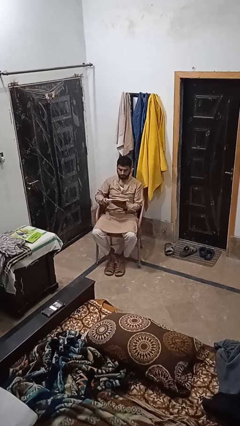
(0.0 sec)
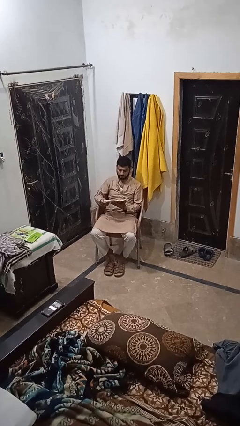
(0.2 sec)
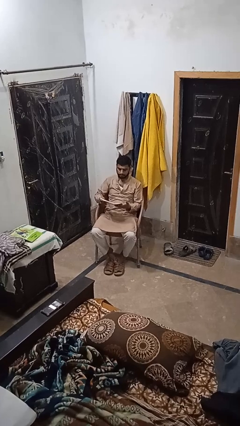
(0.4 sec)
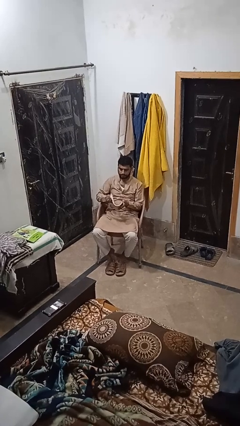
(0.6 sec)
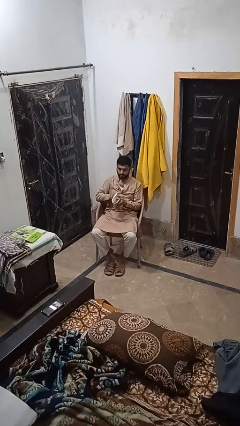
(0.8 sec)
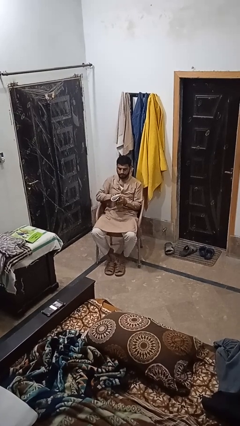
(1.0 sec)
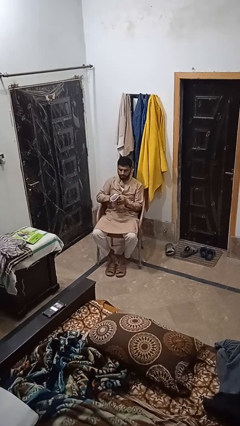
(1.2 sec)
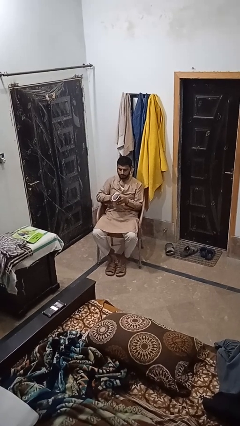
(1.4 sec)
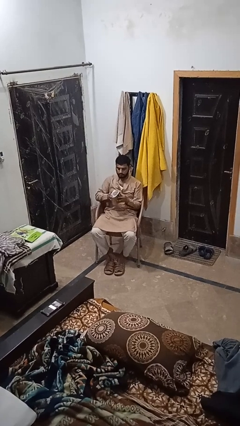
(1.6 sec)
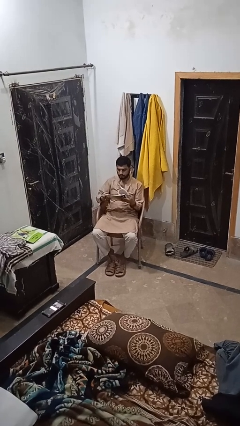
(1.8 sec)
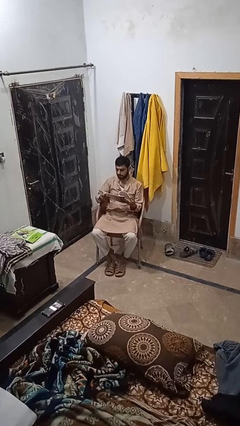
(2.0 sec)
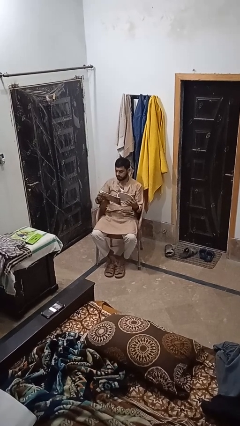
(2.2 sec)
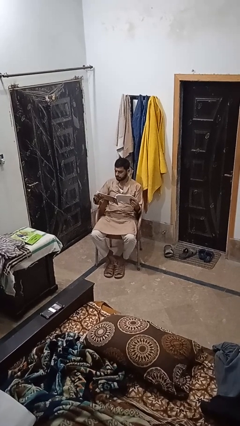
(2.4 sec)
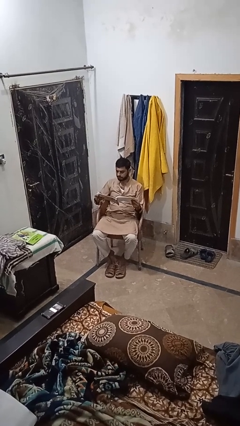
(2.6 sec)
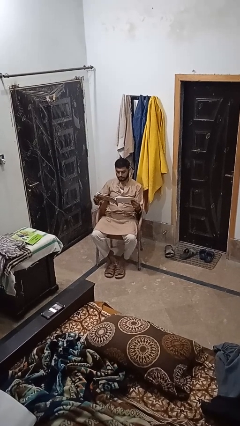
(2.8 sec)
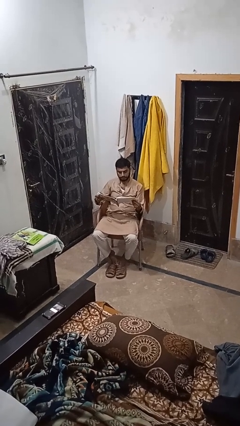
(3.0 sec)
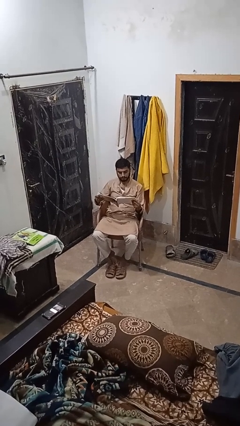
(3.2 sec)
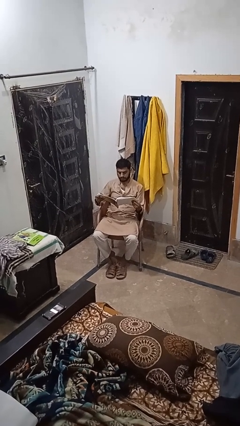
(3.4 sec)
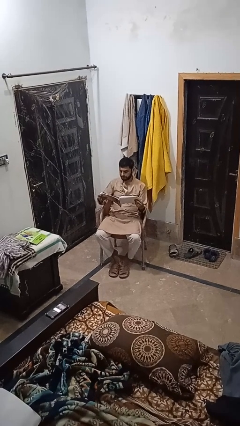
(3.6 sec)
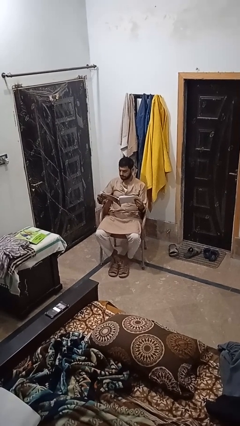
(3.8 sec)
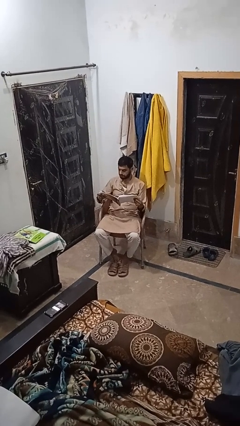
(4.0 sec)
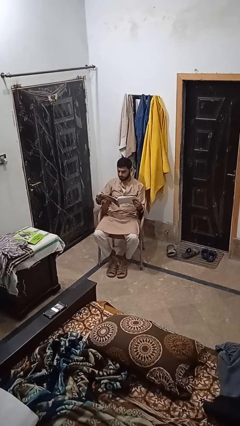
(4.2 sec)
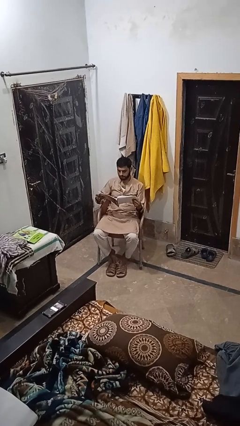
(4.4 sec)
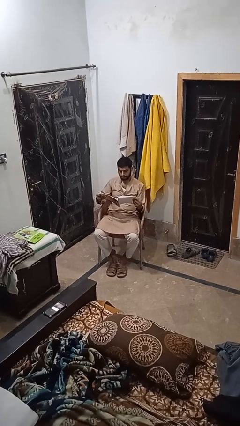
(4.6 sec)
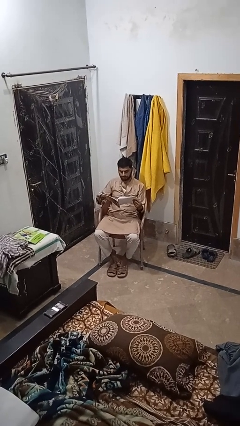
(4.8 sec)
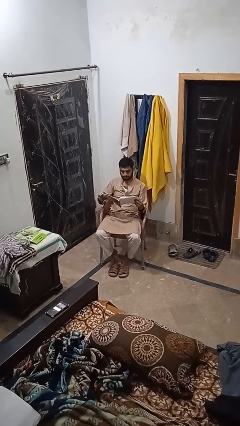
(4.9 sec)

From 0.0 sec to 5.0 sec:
person reads book

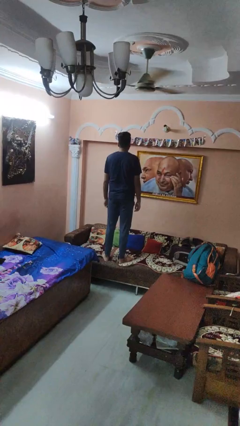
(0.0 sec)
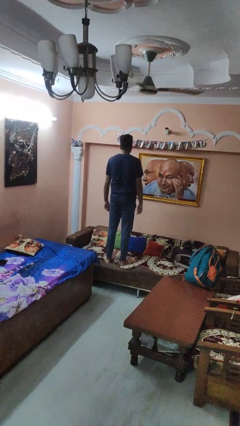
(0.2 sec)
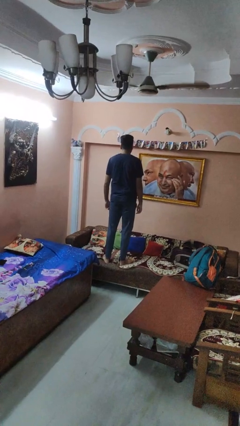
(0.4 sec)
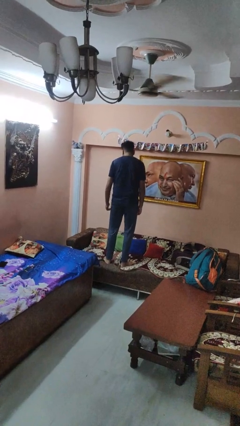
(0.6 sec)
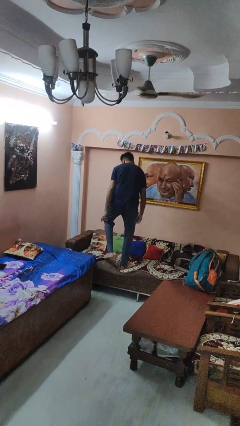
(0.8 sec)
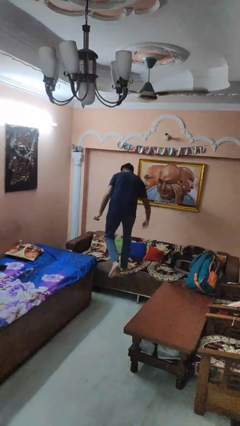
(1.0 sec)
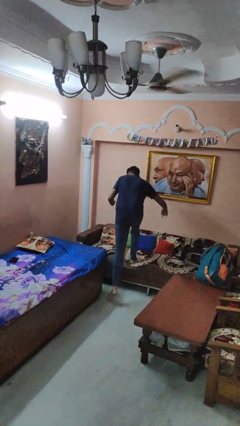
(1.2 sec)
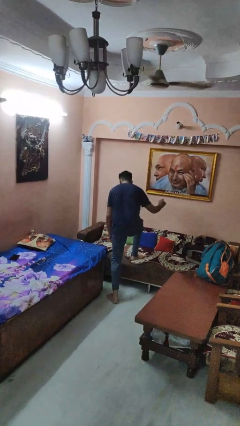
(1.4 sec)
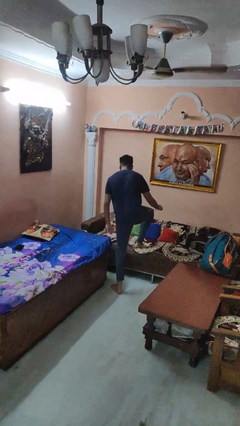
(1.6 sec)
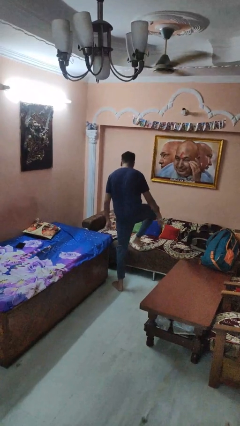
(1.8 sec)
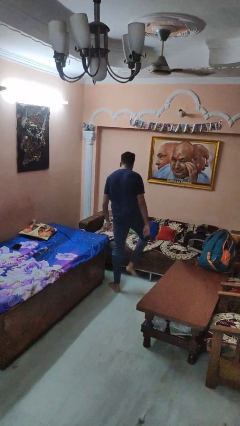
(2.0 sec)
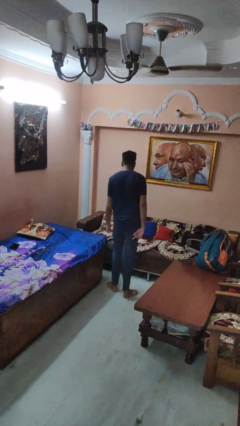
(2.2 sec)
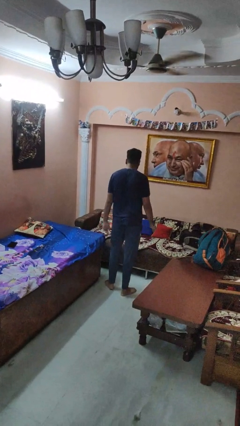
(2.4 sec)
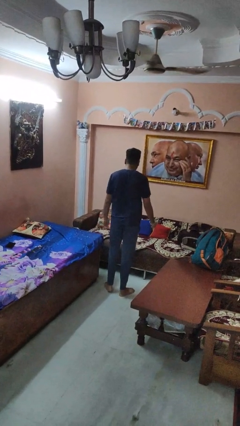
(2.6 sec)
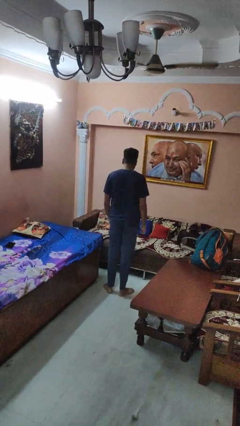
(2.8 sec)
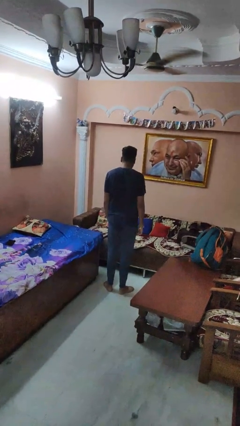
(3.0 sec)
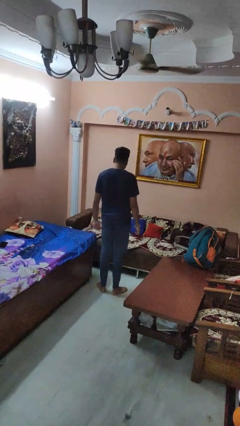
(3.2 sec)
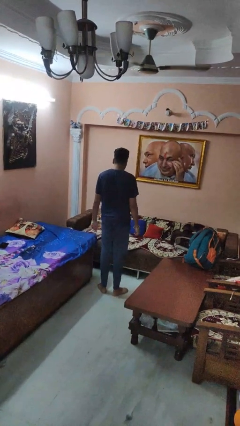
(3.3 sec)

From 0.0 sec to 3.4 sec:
person climbs off couch

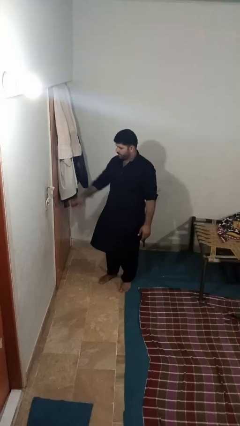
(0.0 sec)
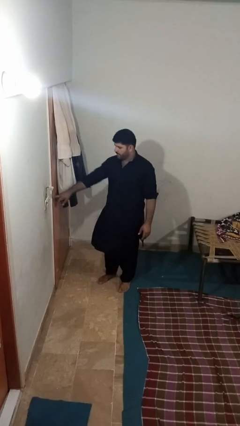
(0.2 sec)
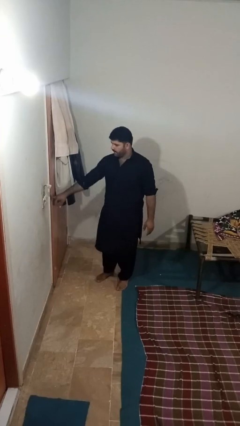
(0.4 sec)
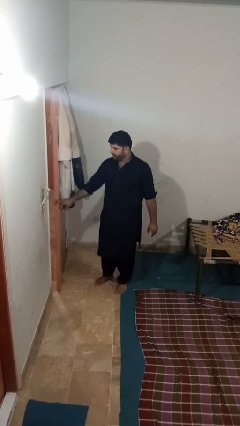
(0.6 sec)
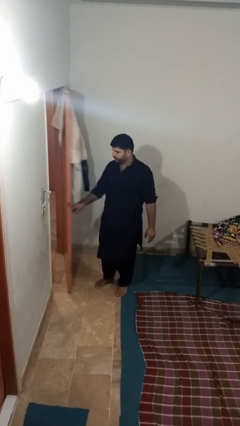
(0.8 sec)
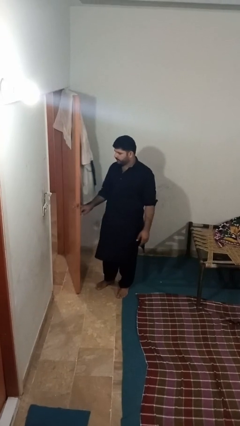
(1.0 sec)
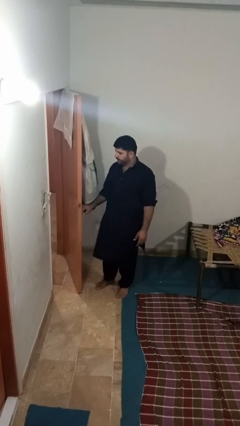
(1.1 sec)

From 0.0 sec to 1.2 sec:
person opens facility door

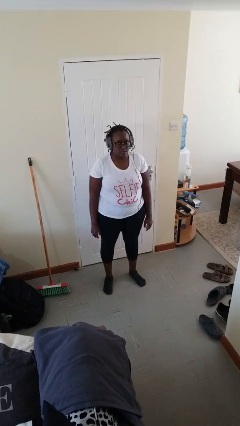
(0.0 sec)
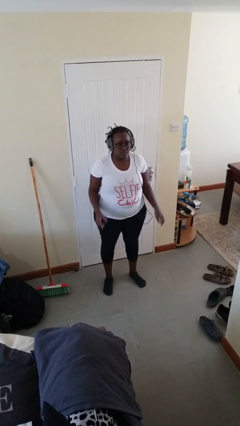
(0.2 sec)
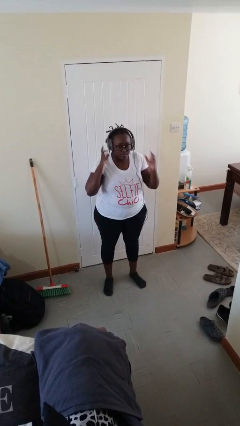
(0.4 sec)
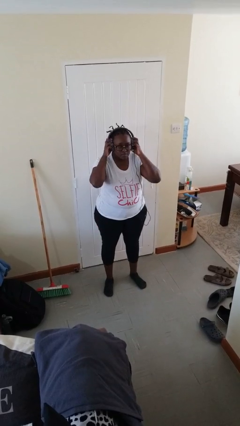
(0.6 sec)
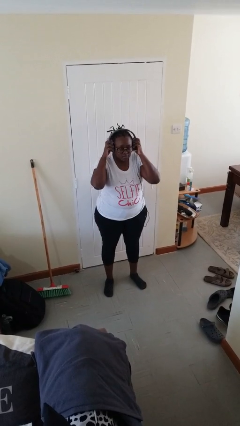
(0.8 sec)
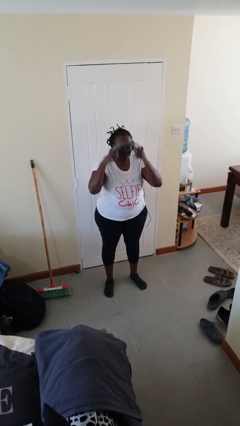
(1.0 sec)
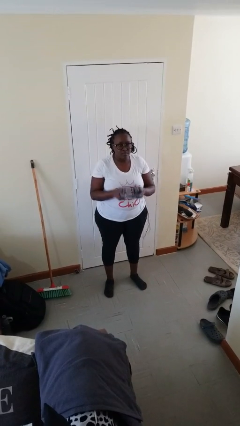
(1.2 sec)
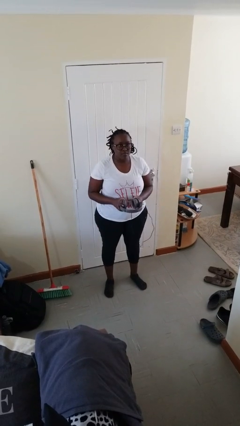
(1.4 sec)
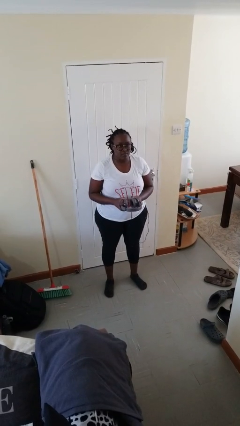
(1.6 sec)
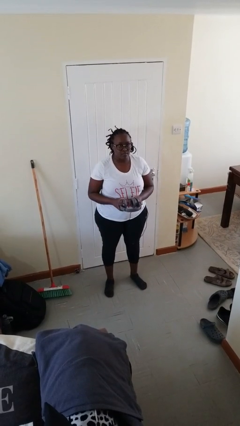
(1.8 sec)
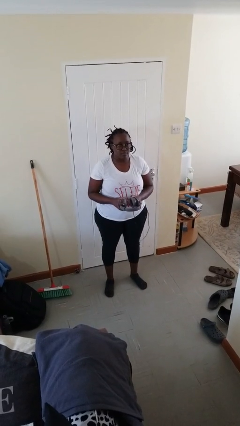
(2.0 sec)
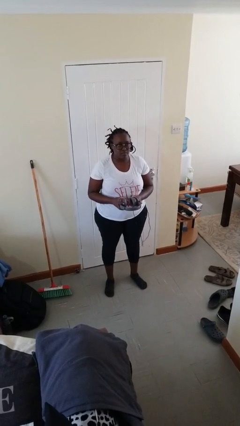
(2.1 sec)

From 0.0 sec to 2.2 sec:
person takes off headphones

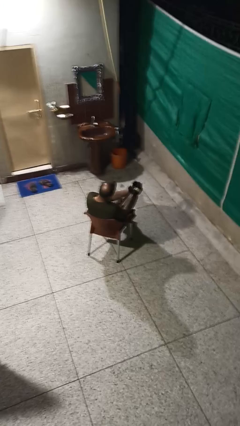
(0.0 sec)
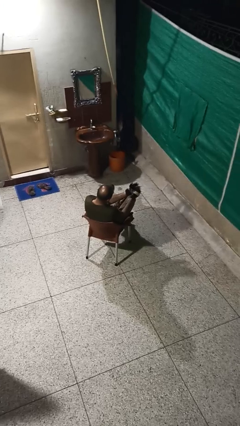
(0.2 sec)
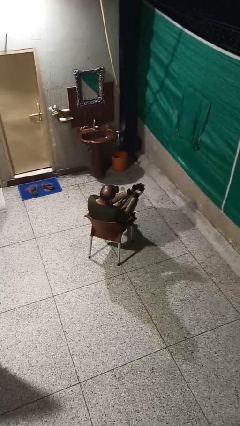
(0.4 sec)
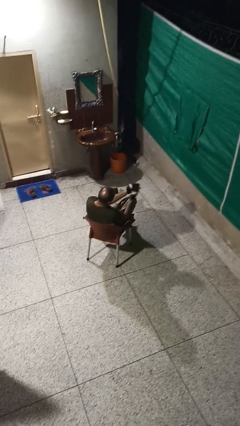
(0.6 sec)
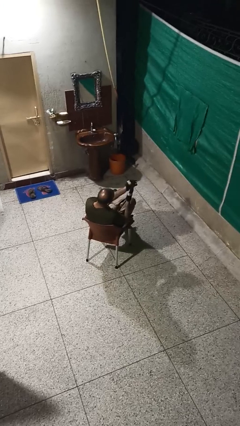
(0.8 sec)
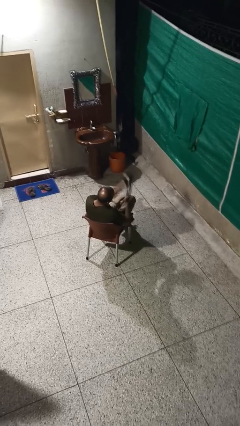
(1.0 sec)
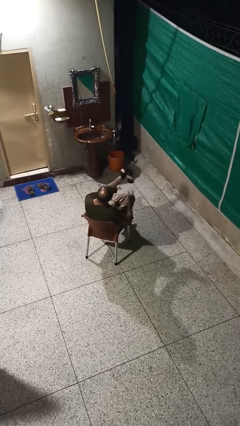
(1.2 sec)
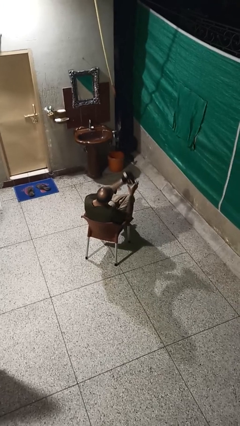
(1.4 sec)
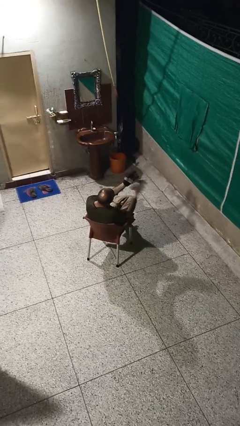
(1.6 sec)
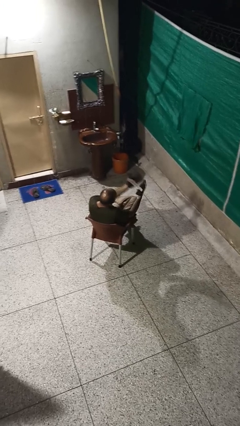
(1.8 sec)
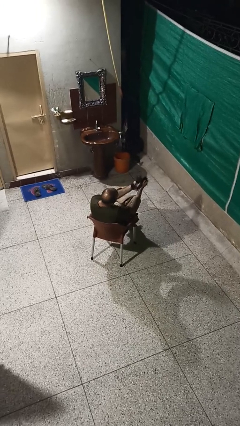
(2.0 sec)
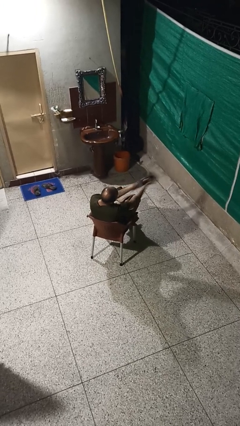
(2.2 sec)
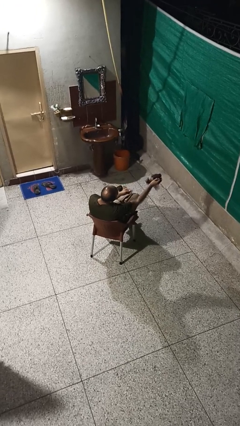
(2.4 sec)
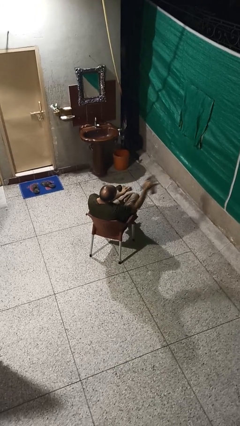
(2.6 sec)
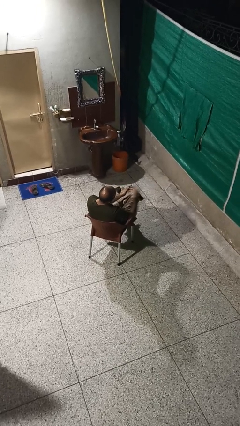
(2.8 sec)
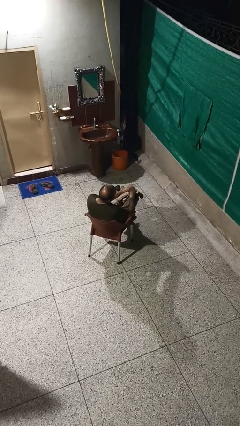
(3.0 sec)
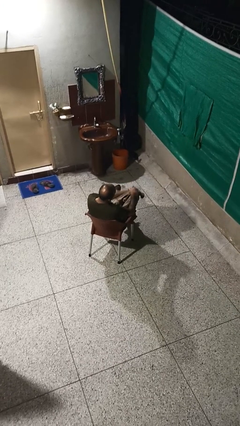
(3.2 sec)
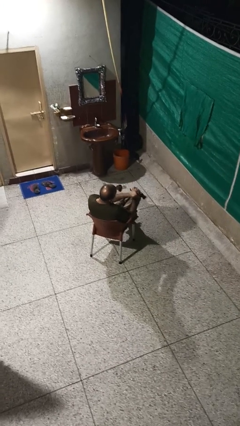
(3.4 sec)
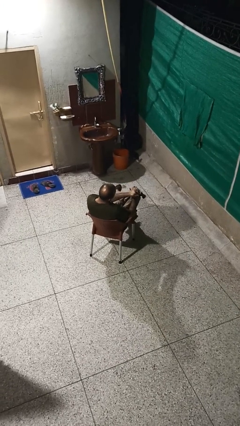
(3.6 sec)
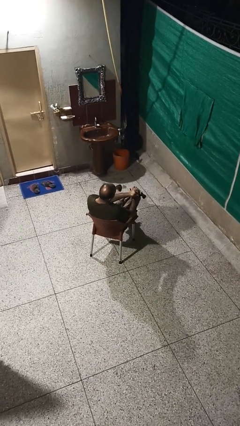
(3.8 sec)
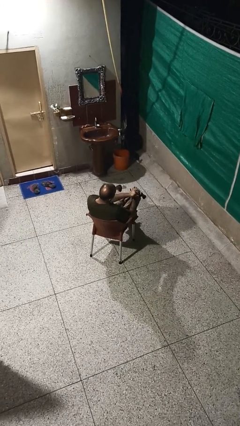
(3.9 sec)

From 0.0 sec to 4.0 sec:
person takes off gloves

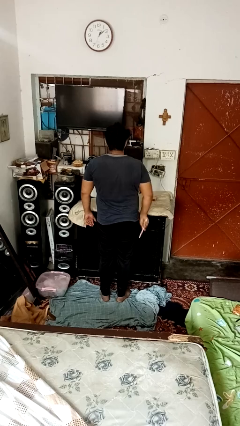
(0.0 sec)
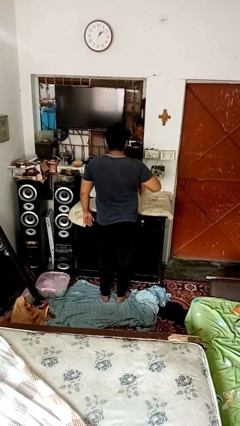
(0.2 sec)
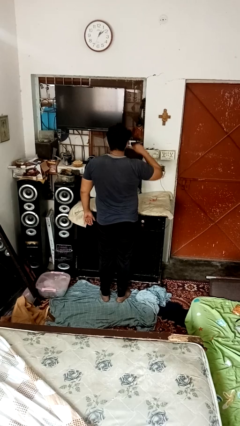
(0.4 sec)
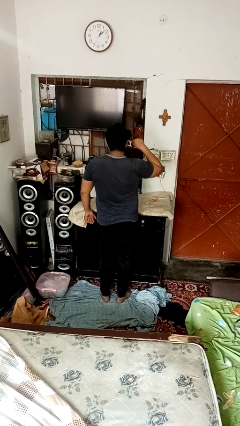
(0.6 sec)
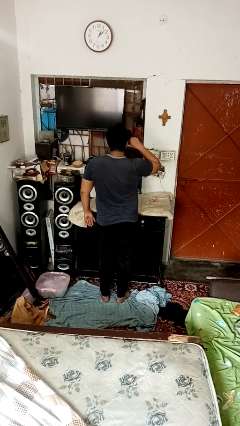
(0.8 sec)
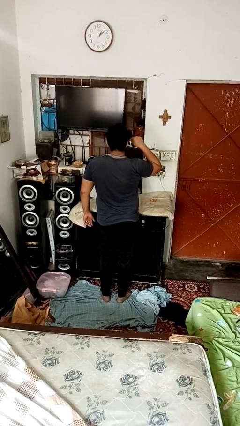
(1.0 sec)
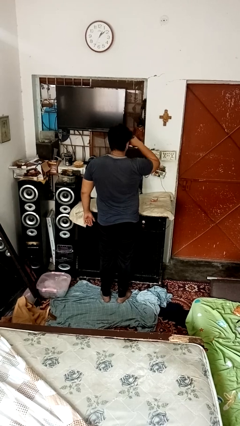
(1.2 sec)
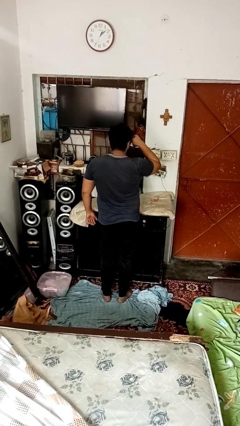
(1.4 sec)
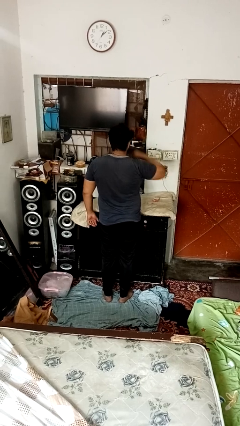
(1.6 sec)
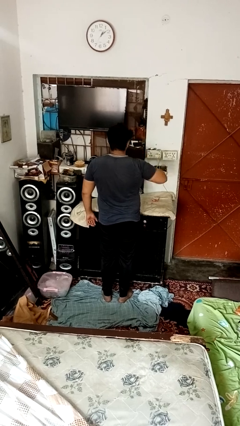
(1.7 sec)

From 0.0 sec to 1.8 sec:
person applies eye makeup
